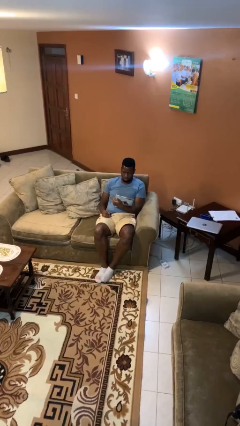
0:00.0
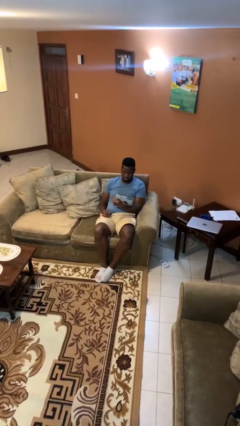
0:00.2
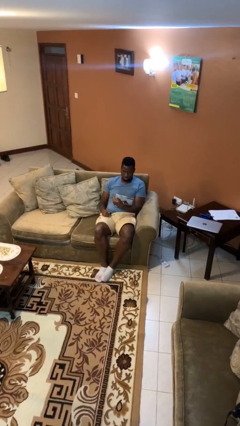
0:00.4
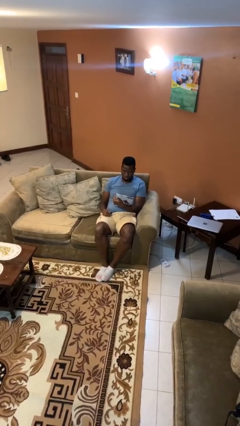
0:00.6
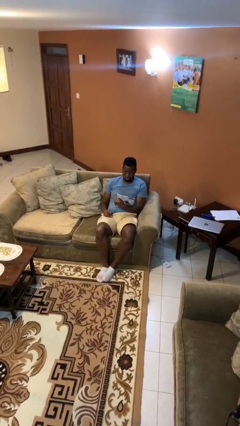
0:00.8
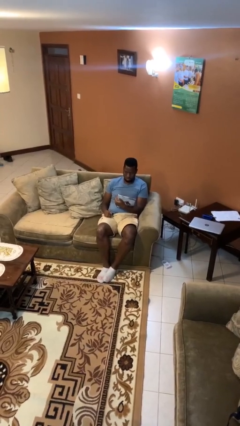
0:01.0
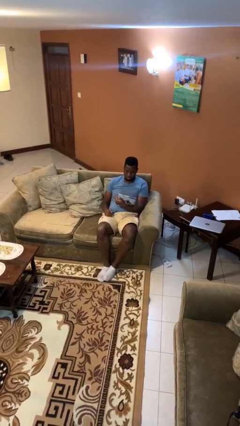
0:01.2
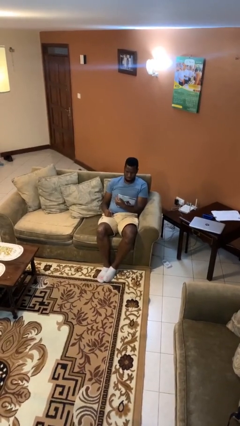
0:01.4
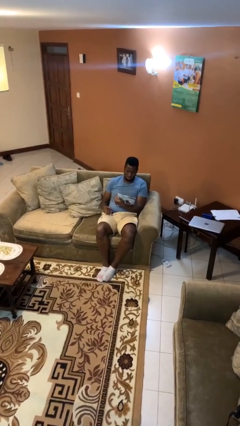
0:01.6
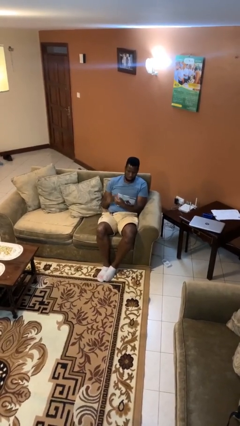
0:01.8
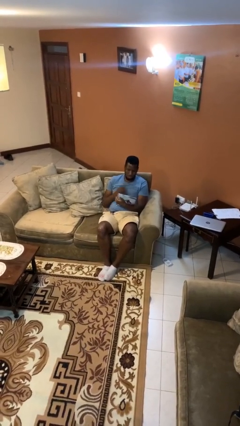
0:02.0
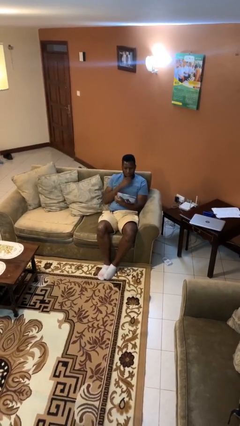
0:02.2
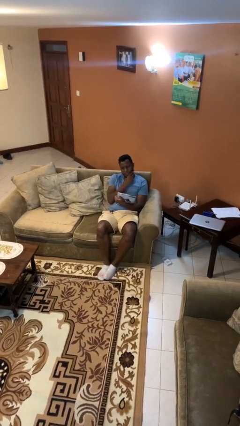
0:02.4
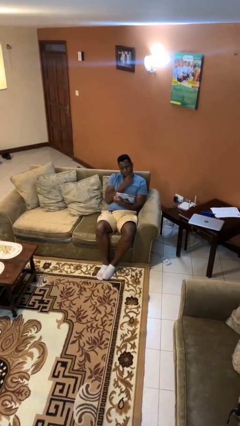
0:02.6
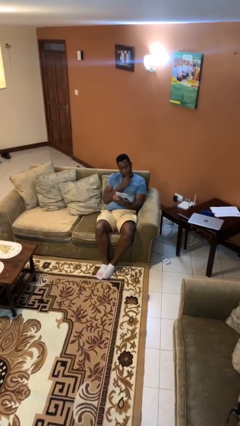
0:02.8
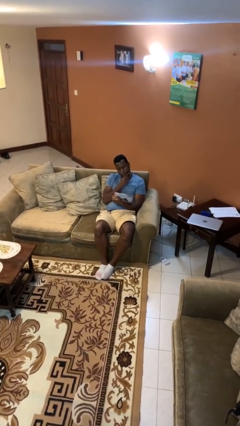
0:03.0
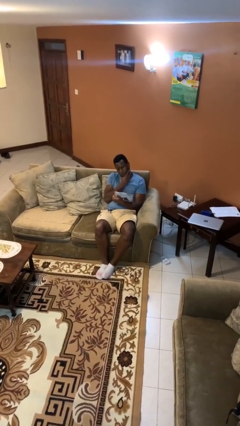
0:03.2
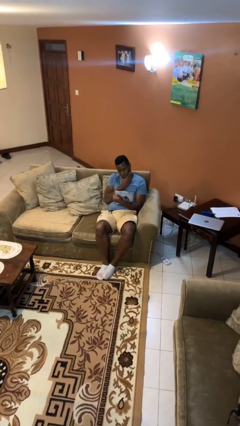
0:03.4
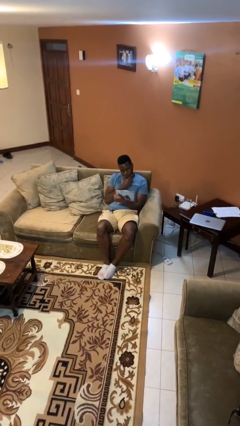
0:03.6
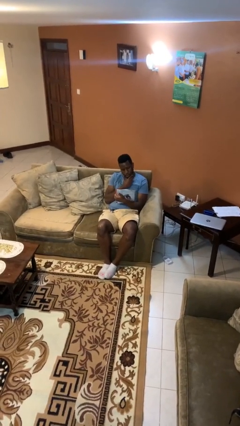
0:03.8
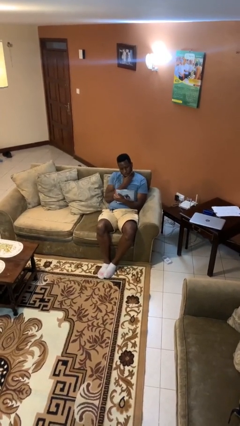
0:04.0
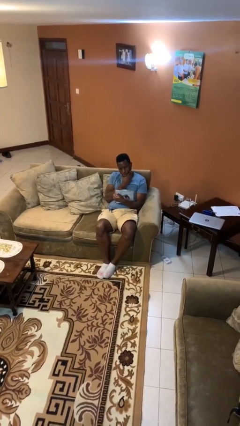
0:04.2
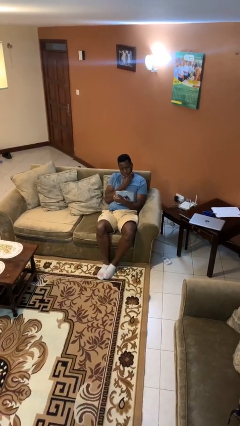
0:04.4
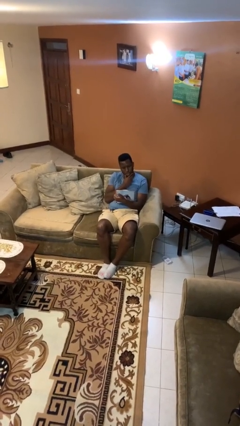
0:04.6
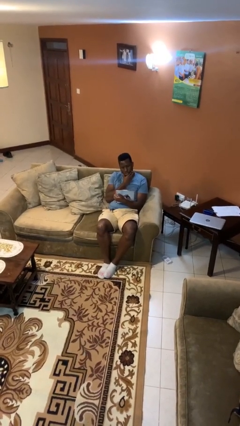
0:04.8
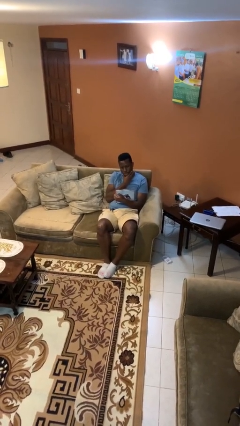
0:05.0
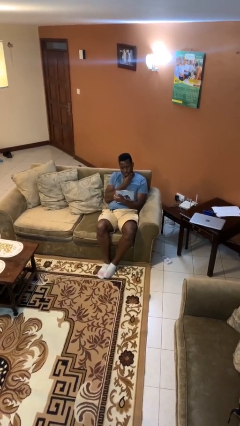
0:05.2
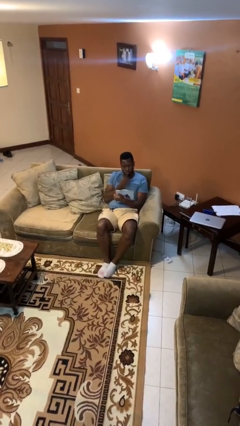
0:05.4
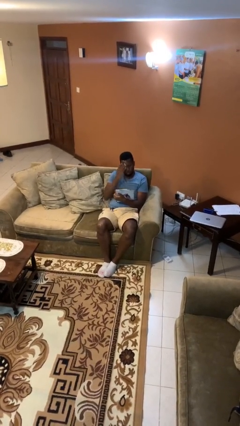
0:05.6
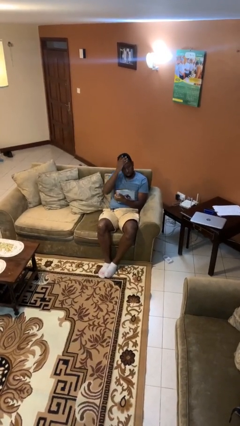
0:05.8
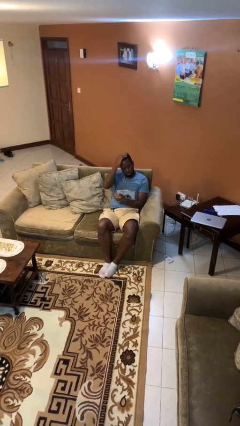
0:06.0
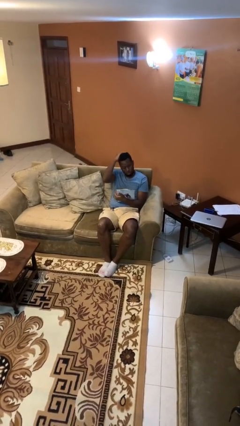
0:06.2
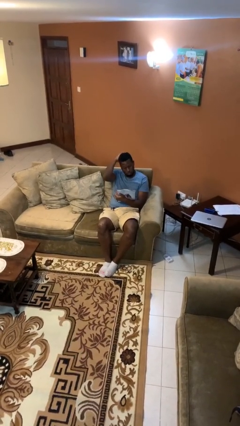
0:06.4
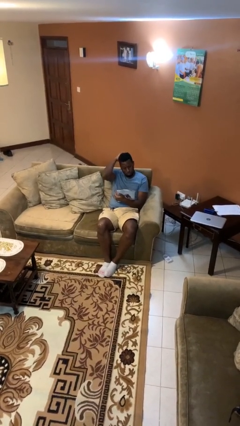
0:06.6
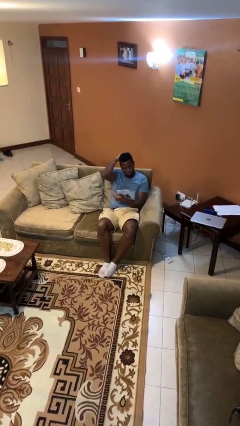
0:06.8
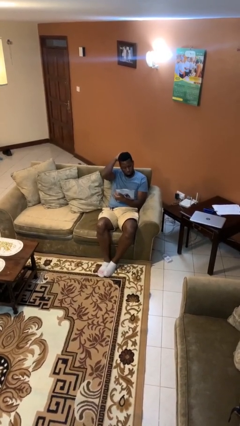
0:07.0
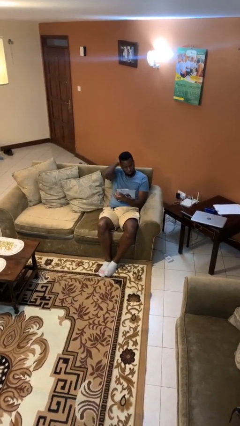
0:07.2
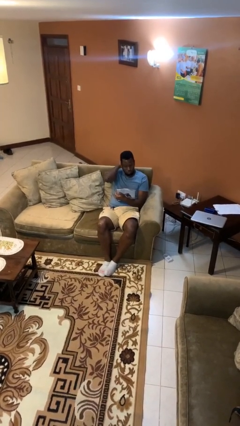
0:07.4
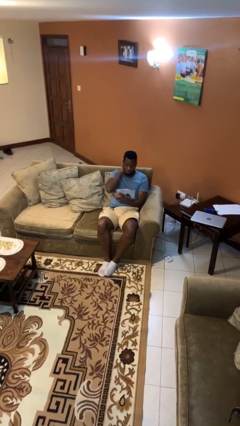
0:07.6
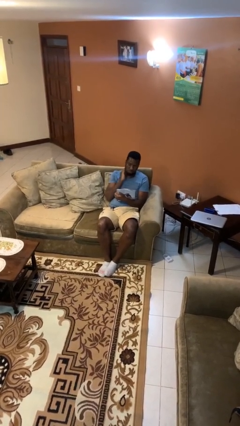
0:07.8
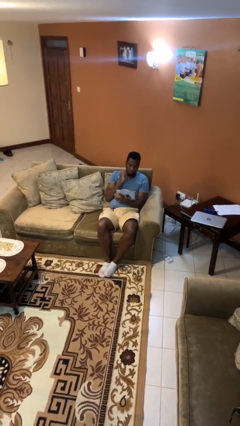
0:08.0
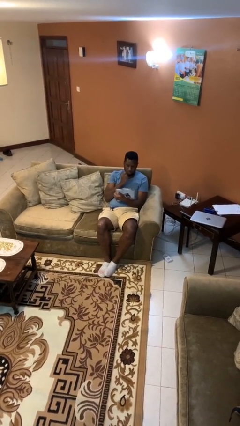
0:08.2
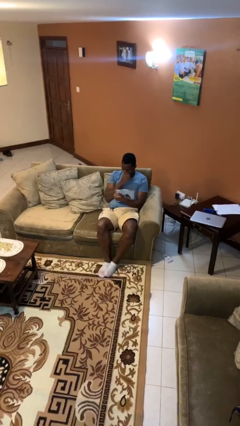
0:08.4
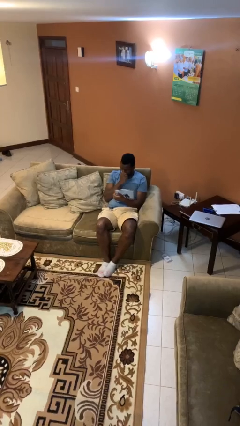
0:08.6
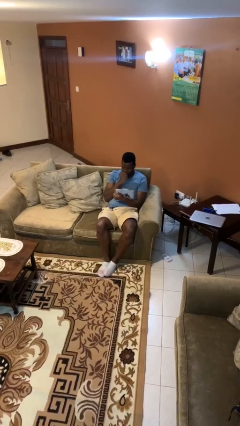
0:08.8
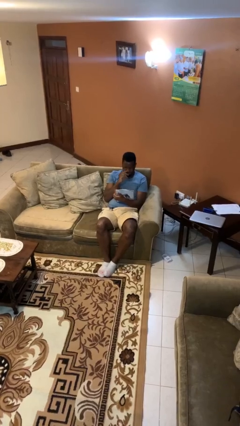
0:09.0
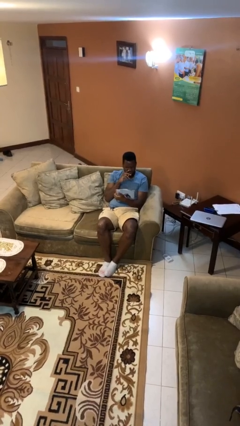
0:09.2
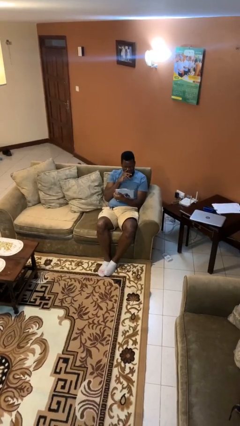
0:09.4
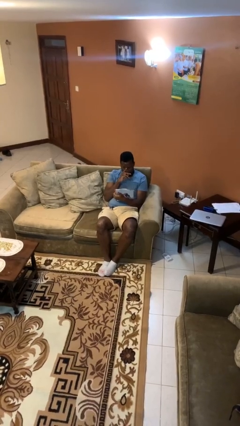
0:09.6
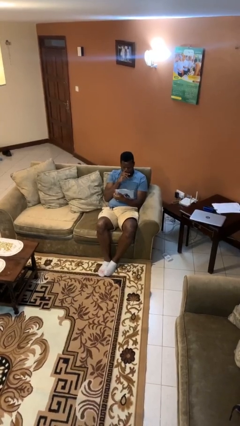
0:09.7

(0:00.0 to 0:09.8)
person reads document

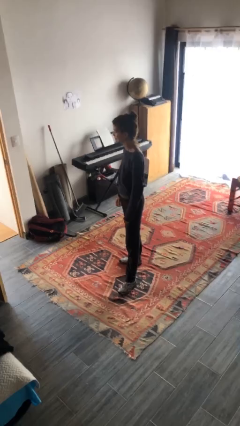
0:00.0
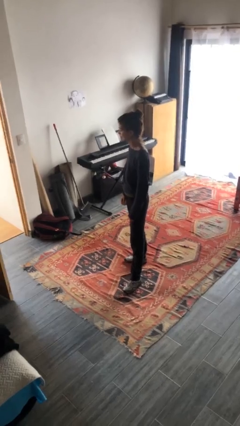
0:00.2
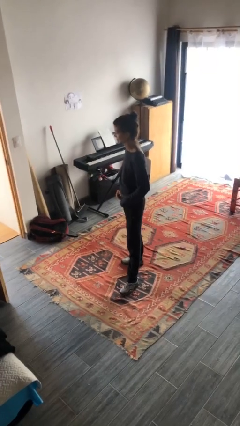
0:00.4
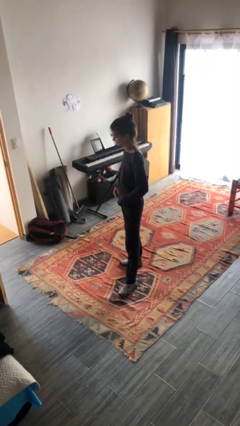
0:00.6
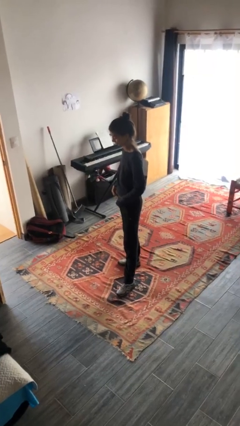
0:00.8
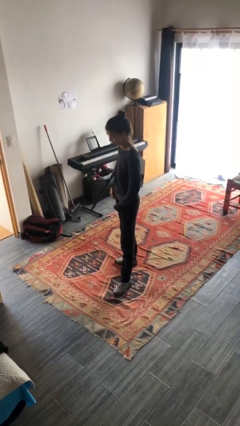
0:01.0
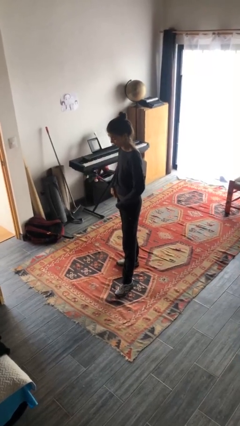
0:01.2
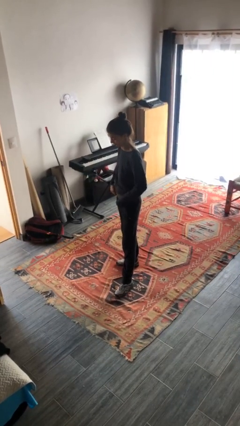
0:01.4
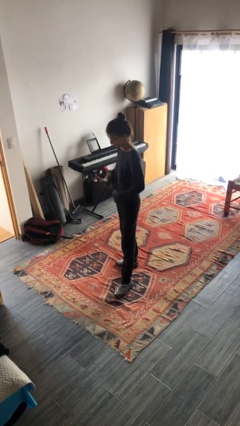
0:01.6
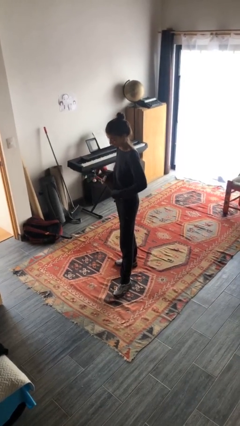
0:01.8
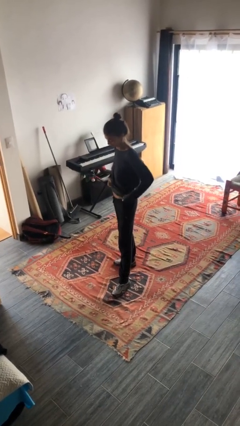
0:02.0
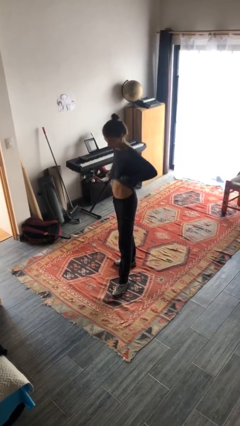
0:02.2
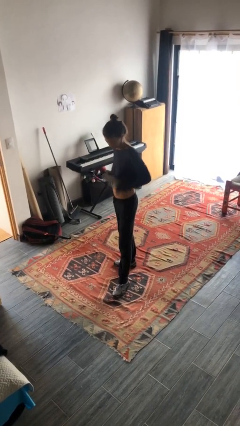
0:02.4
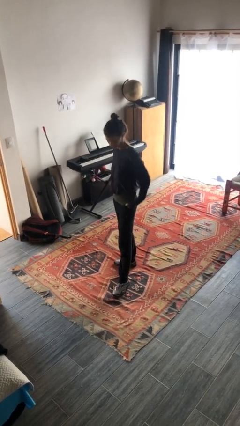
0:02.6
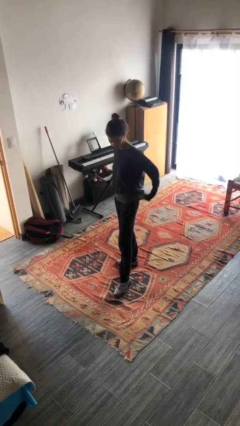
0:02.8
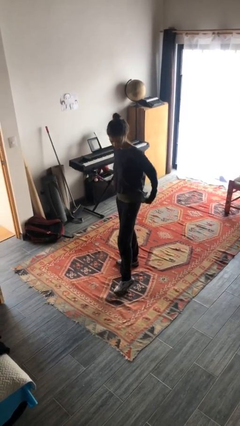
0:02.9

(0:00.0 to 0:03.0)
person untucks shirt

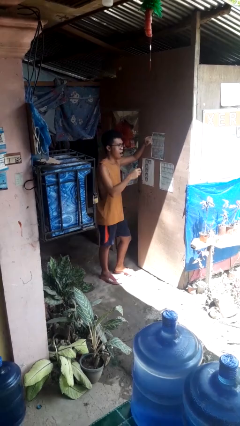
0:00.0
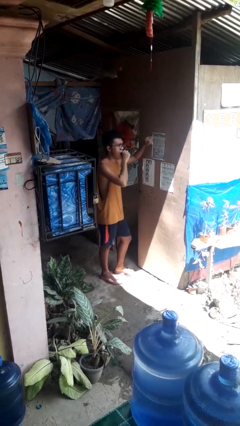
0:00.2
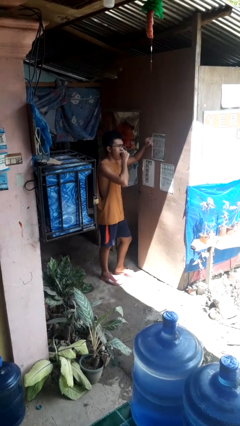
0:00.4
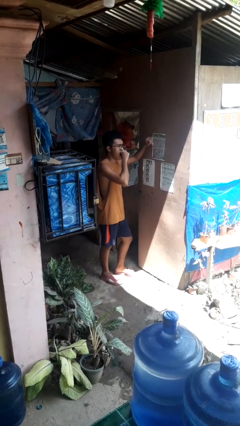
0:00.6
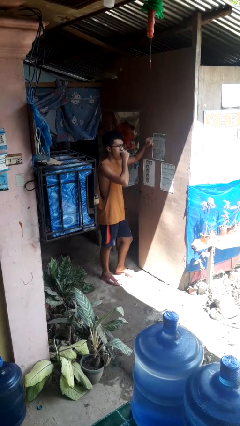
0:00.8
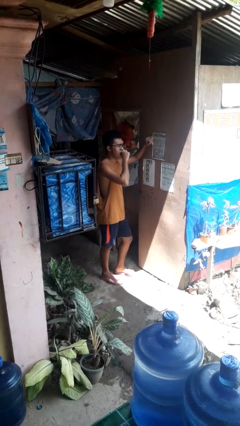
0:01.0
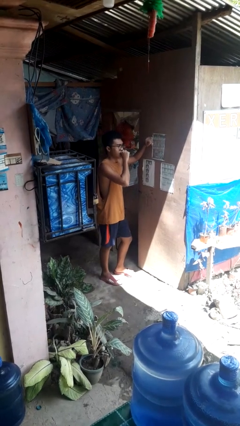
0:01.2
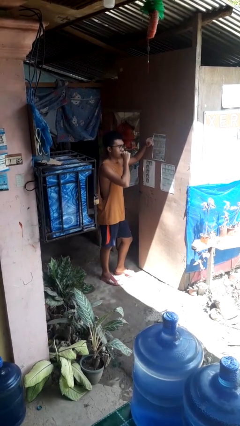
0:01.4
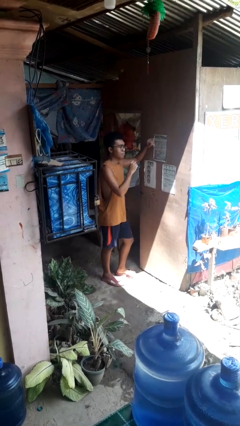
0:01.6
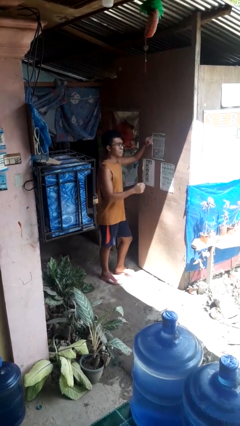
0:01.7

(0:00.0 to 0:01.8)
person yawns

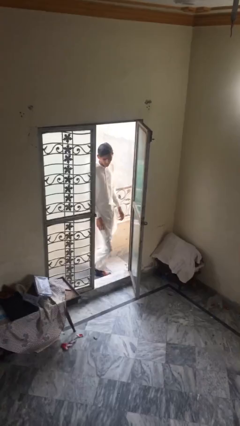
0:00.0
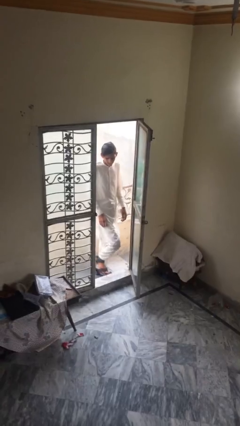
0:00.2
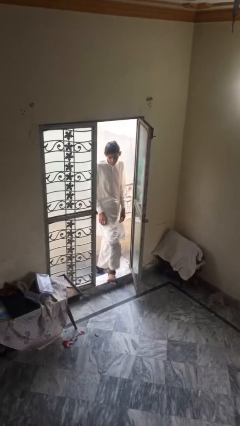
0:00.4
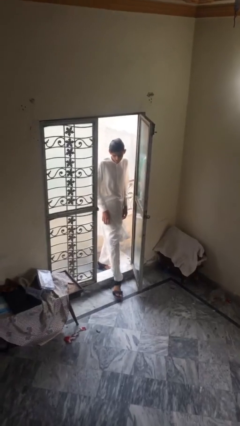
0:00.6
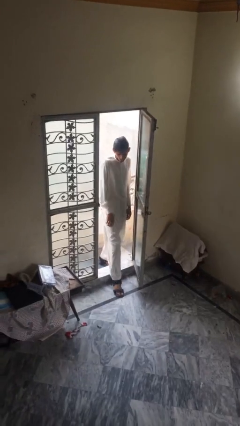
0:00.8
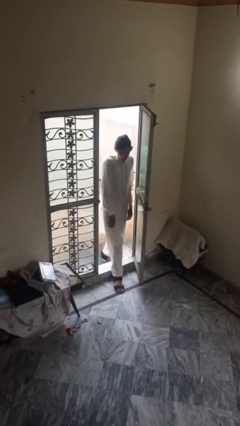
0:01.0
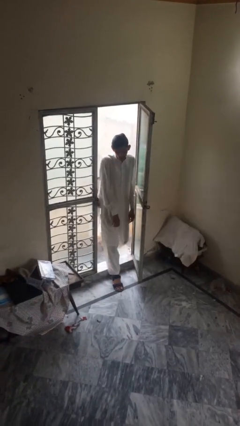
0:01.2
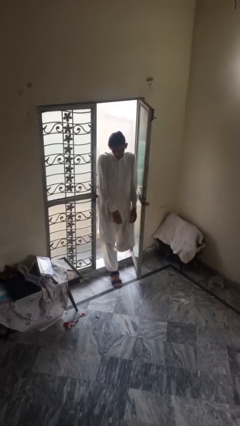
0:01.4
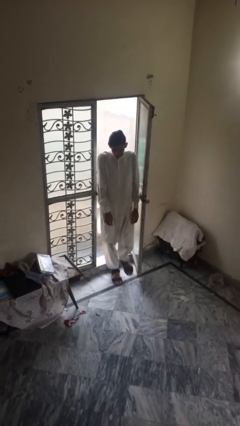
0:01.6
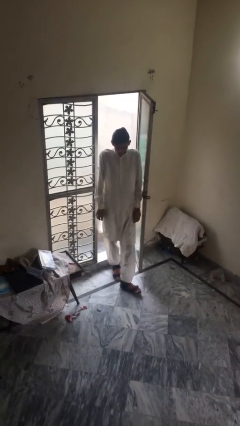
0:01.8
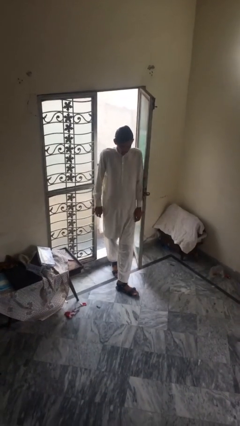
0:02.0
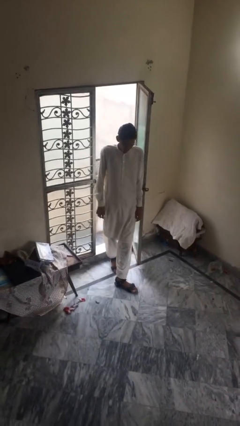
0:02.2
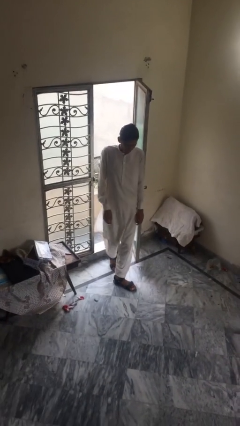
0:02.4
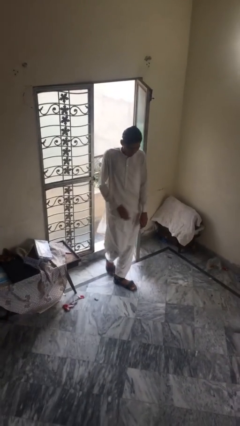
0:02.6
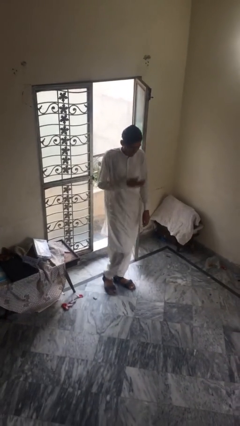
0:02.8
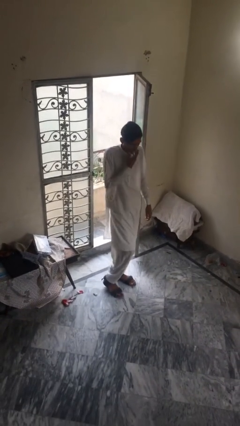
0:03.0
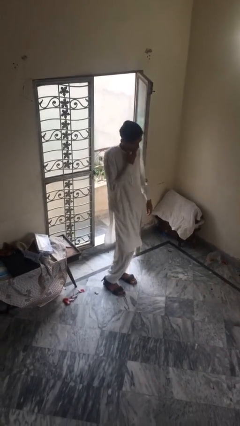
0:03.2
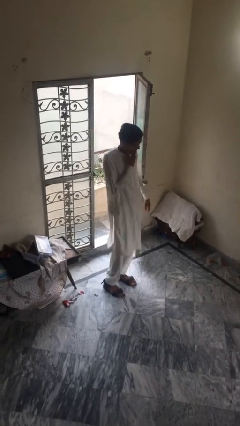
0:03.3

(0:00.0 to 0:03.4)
person enters scene through structure
